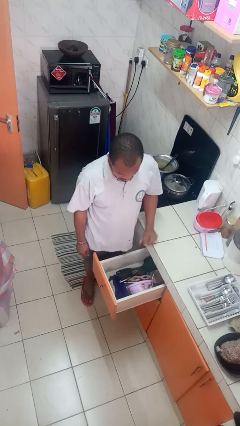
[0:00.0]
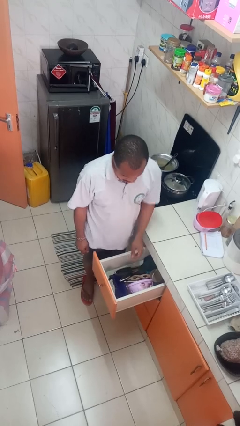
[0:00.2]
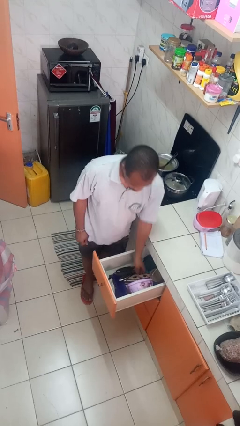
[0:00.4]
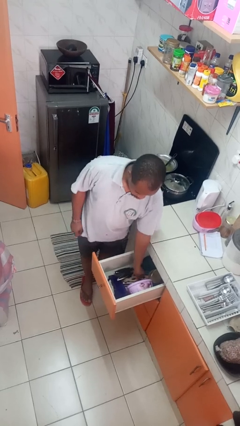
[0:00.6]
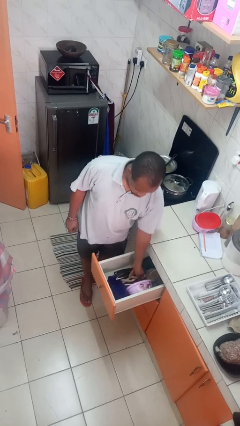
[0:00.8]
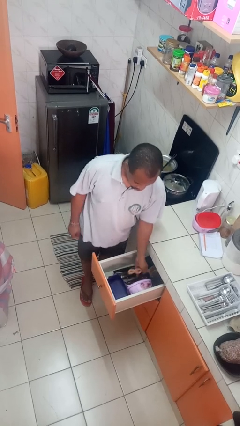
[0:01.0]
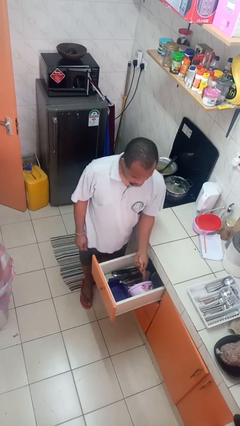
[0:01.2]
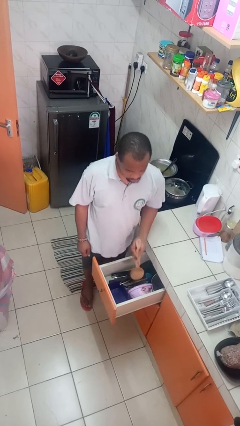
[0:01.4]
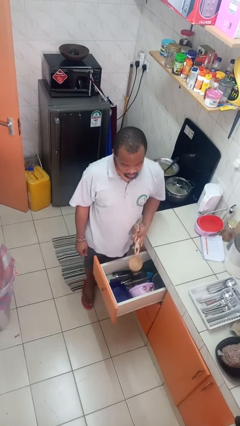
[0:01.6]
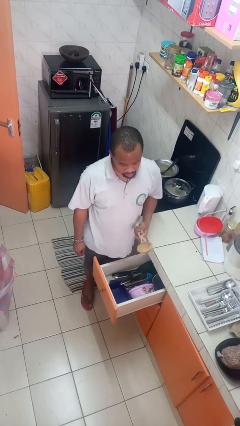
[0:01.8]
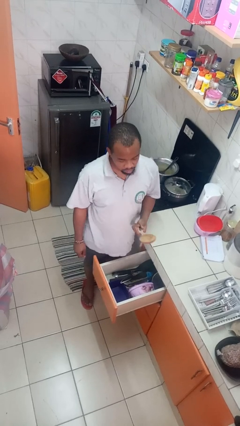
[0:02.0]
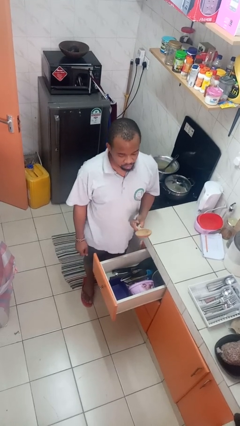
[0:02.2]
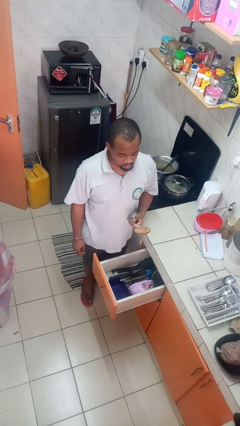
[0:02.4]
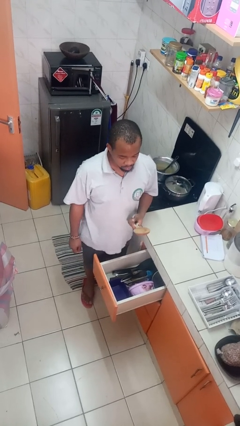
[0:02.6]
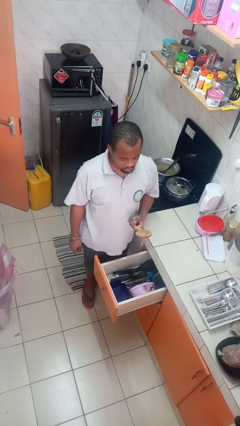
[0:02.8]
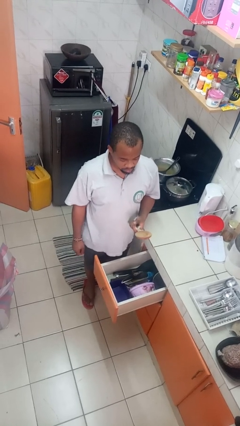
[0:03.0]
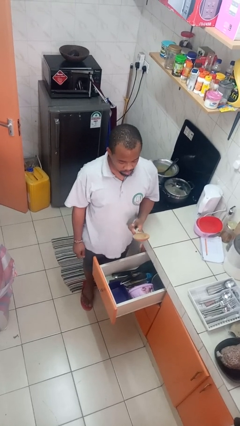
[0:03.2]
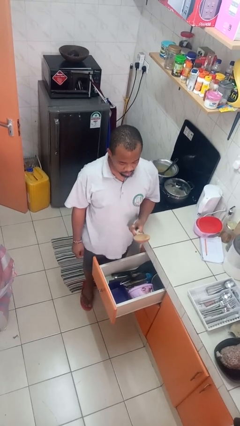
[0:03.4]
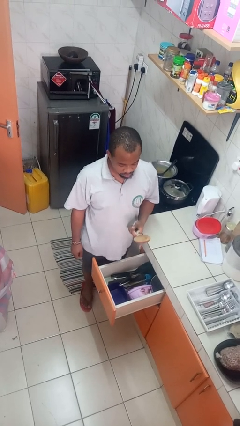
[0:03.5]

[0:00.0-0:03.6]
person takes object from kitchen drawer

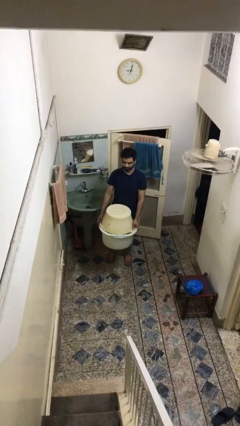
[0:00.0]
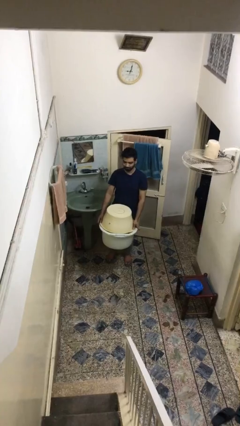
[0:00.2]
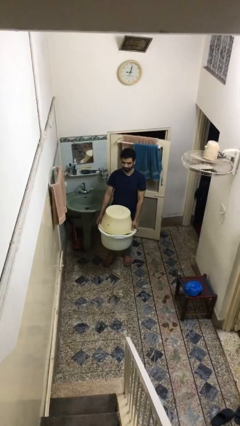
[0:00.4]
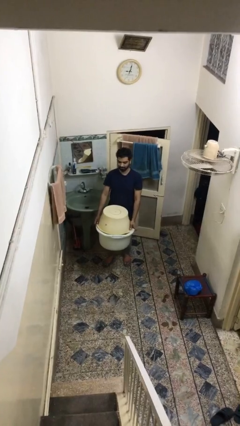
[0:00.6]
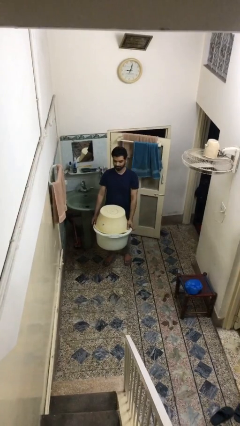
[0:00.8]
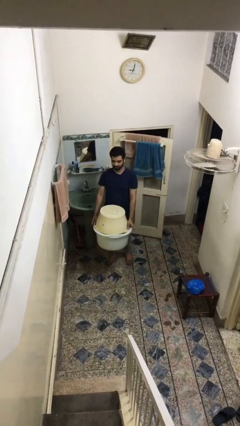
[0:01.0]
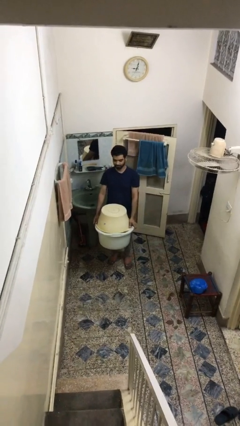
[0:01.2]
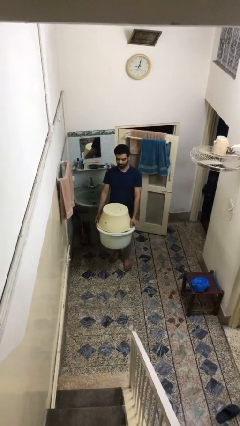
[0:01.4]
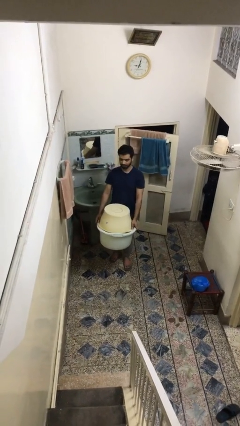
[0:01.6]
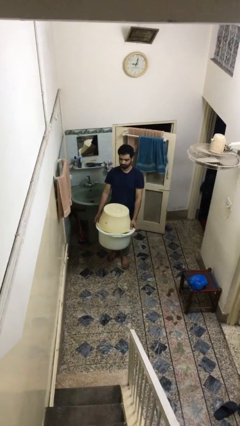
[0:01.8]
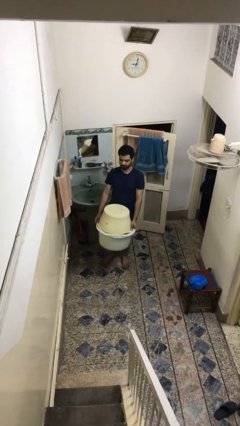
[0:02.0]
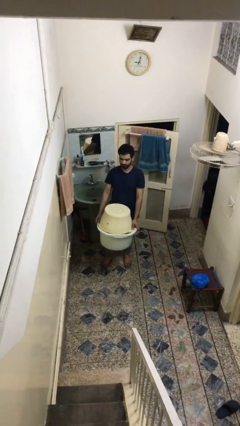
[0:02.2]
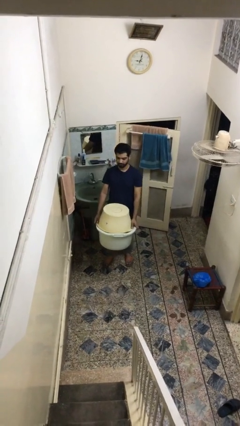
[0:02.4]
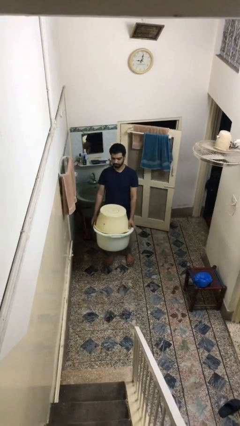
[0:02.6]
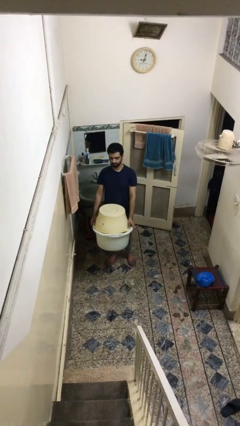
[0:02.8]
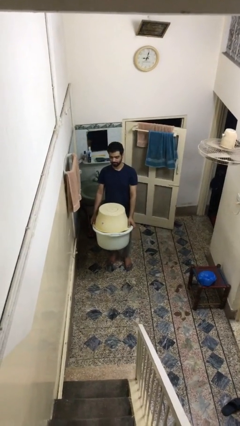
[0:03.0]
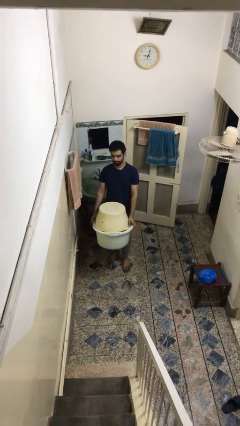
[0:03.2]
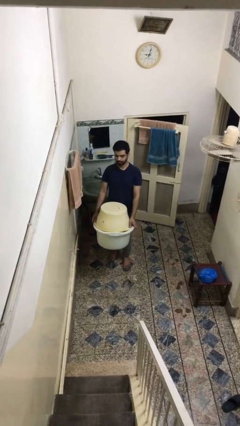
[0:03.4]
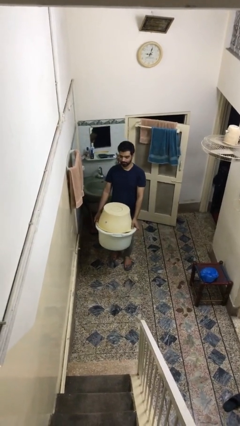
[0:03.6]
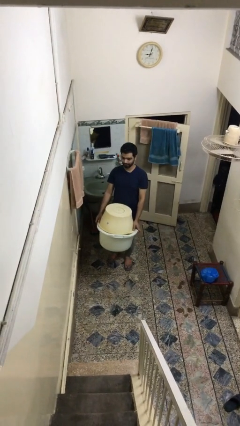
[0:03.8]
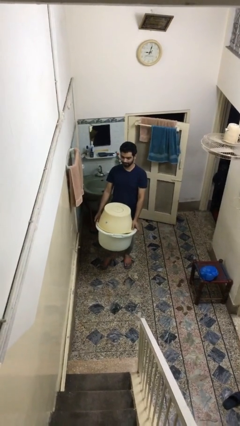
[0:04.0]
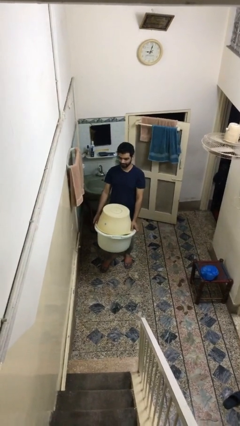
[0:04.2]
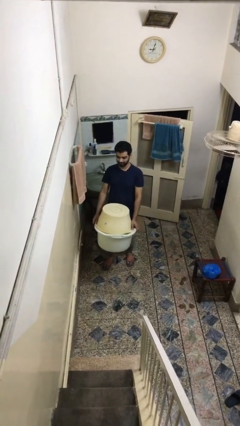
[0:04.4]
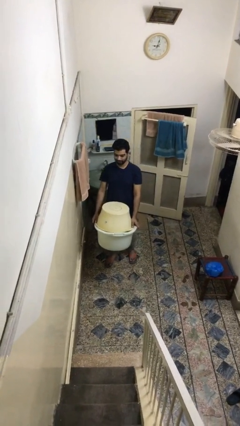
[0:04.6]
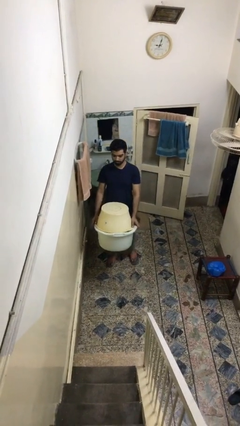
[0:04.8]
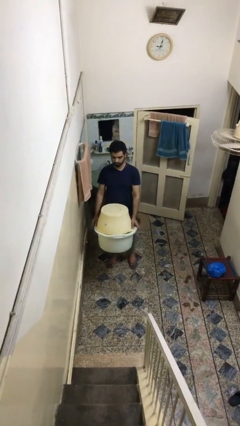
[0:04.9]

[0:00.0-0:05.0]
person carries heavy object

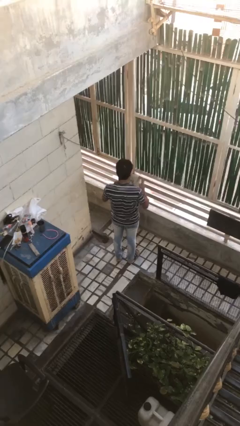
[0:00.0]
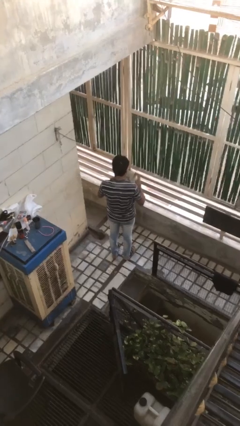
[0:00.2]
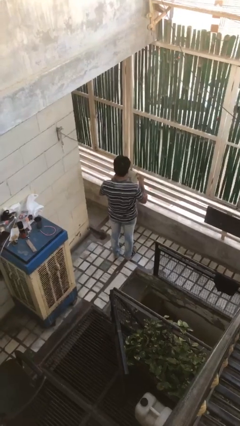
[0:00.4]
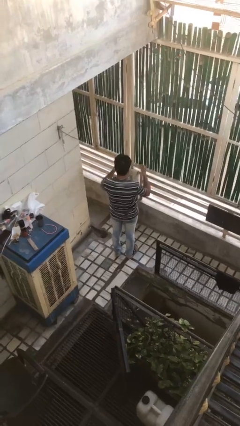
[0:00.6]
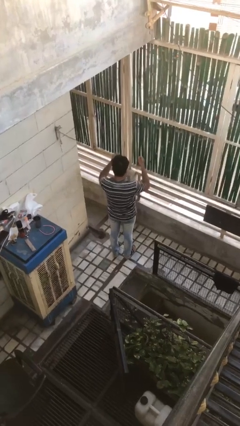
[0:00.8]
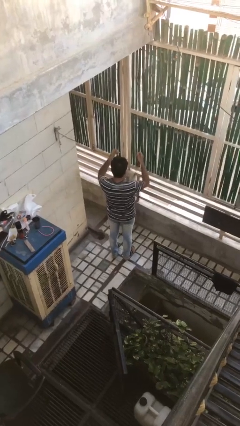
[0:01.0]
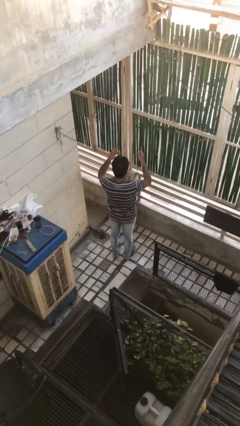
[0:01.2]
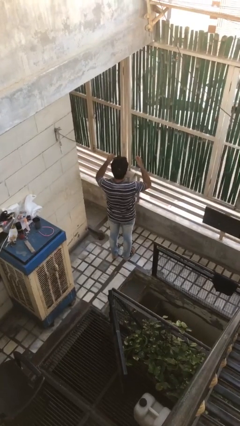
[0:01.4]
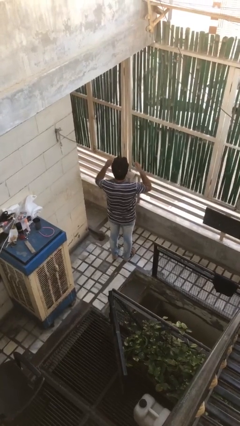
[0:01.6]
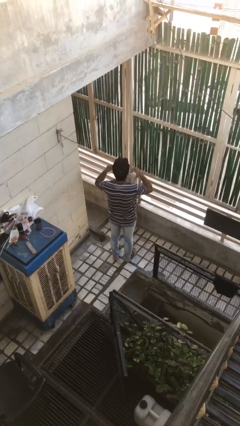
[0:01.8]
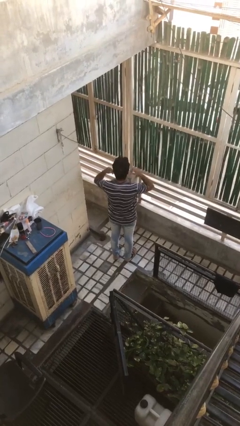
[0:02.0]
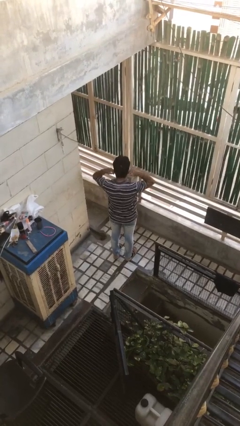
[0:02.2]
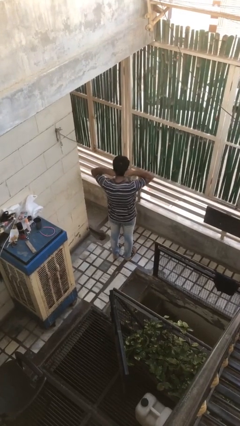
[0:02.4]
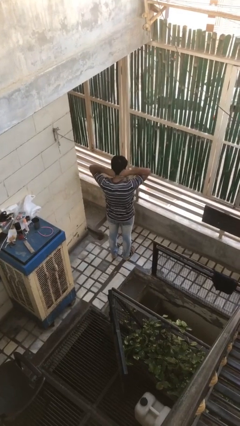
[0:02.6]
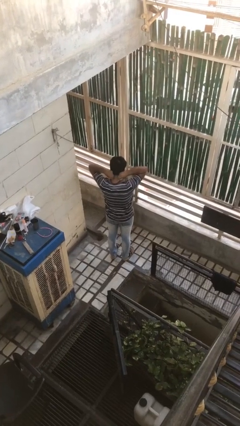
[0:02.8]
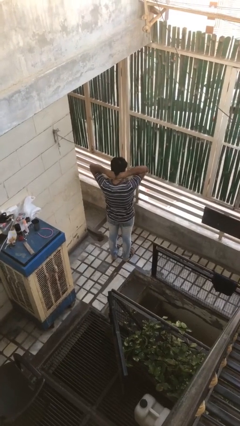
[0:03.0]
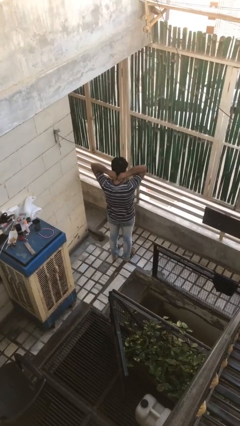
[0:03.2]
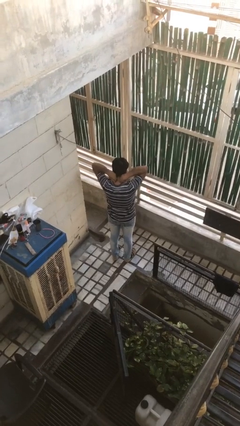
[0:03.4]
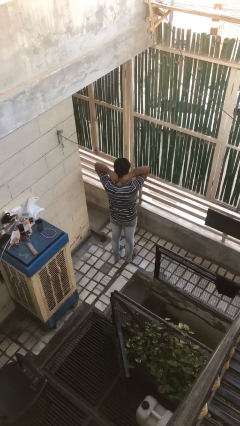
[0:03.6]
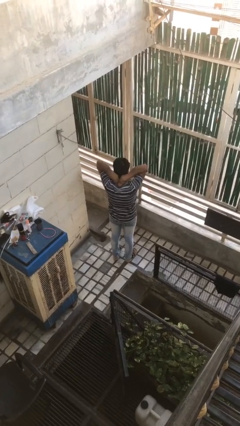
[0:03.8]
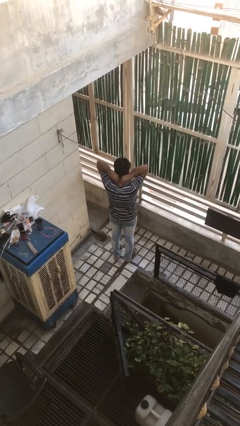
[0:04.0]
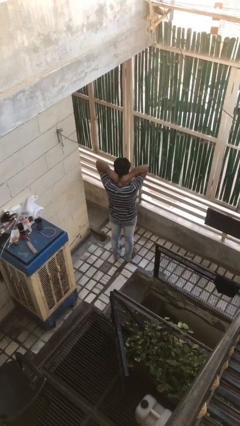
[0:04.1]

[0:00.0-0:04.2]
person puts on necklace

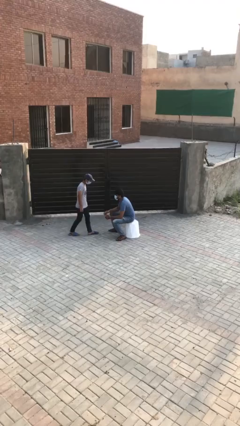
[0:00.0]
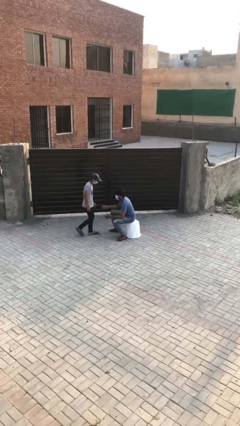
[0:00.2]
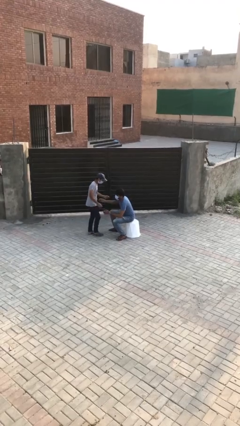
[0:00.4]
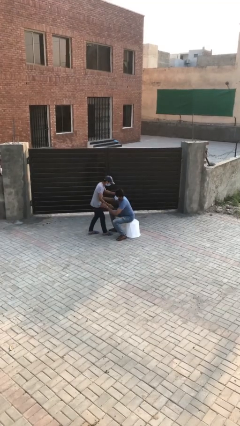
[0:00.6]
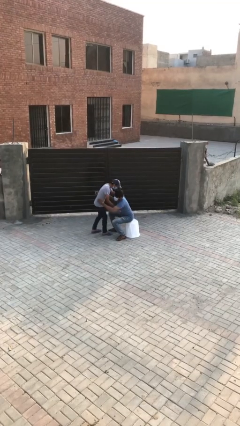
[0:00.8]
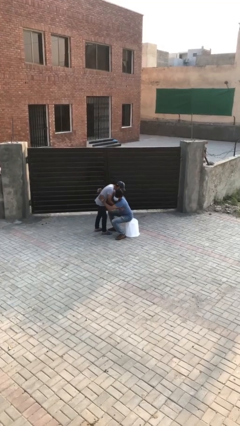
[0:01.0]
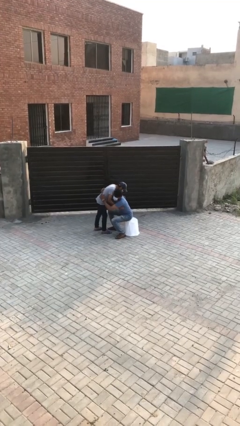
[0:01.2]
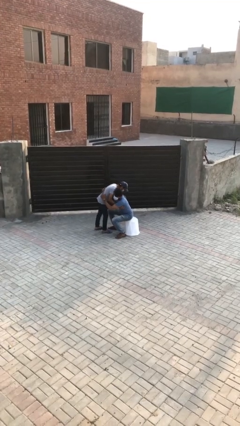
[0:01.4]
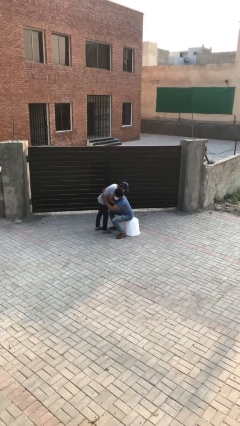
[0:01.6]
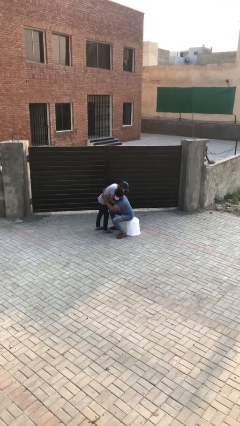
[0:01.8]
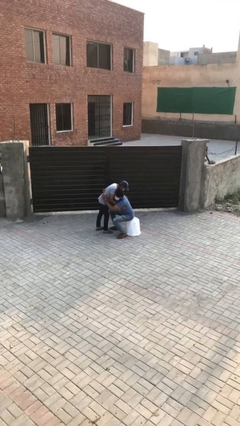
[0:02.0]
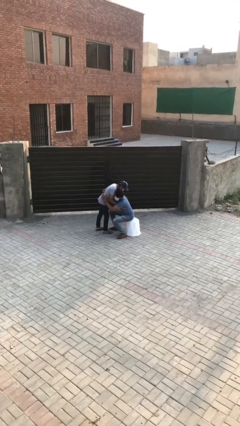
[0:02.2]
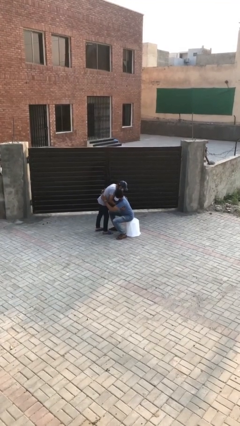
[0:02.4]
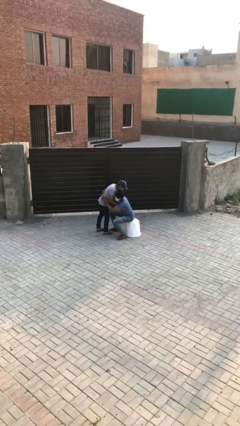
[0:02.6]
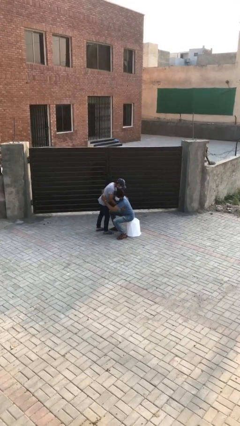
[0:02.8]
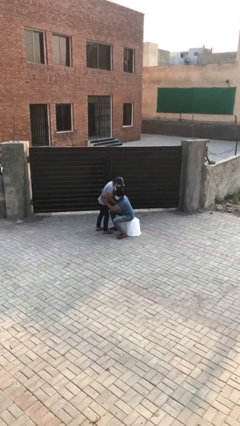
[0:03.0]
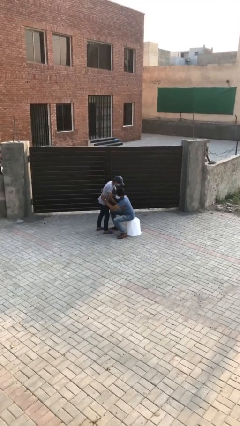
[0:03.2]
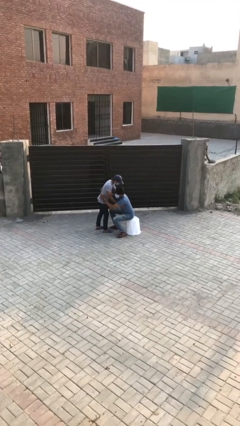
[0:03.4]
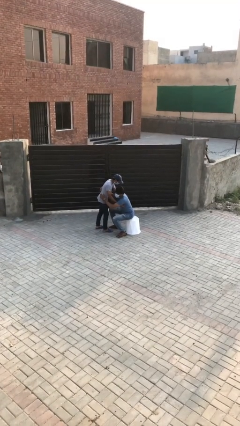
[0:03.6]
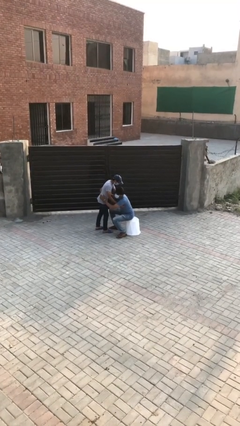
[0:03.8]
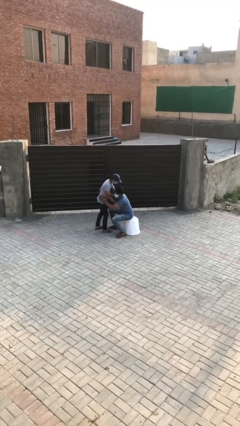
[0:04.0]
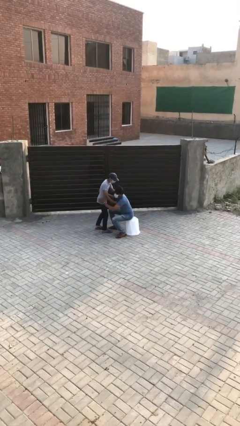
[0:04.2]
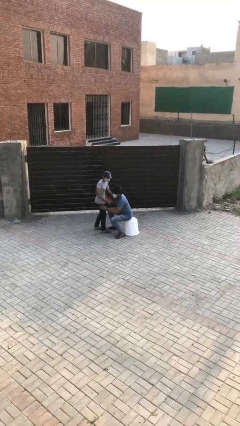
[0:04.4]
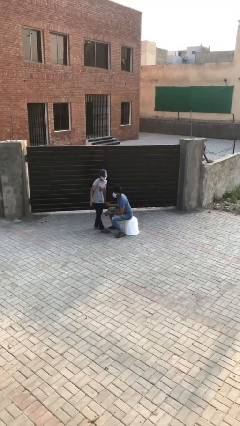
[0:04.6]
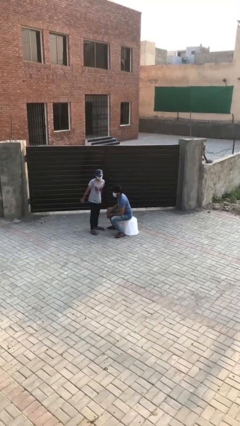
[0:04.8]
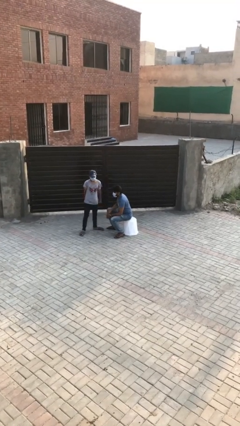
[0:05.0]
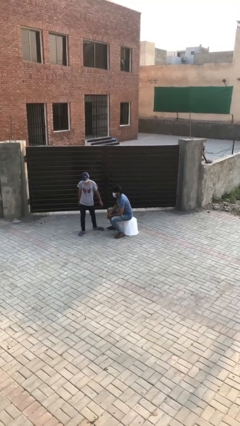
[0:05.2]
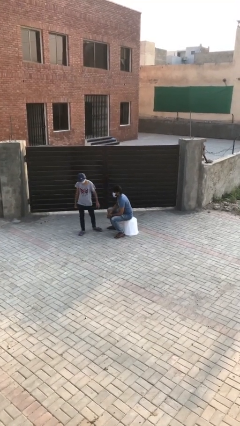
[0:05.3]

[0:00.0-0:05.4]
person embraces person
